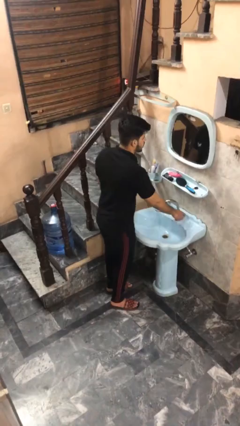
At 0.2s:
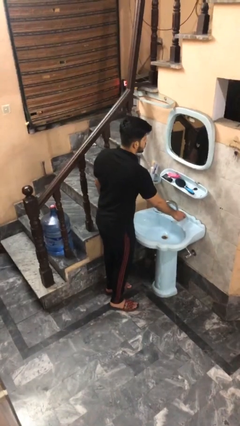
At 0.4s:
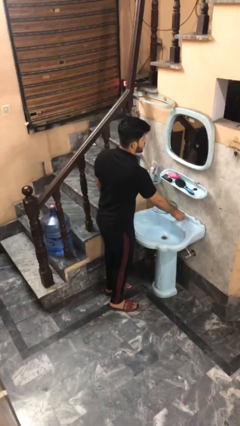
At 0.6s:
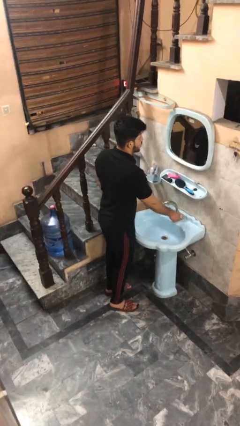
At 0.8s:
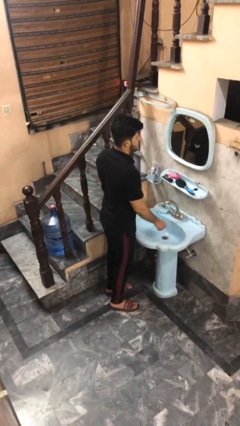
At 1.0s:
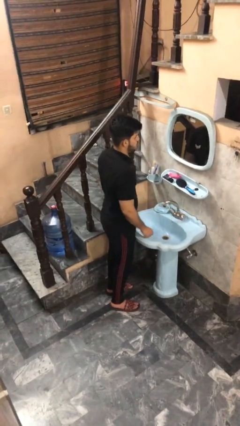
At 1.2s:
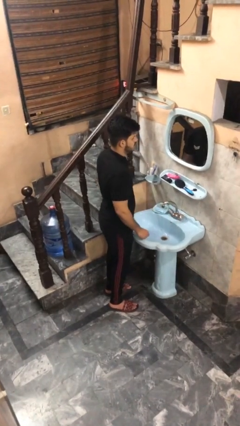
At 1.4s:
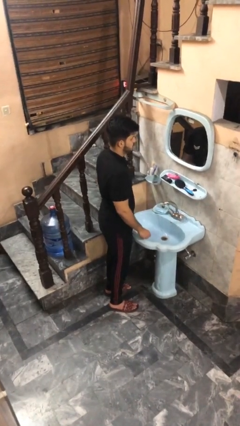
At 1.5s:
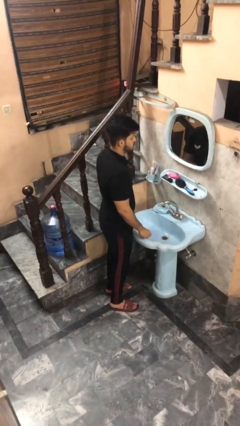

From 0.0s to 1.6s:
person turns off faucet

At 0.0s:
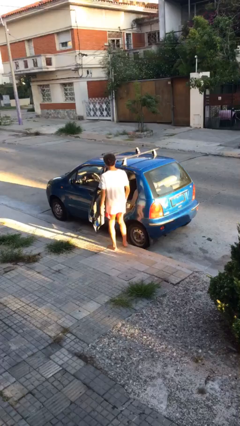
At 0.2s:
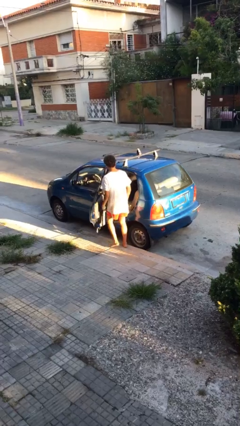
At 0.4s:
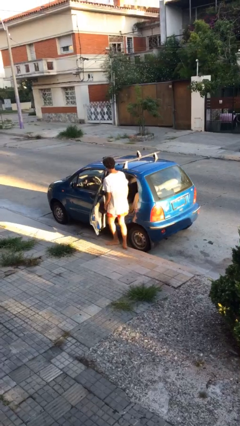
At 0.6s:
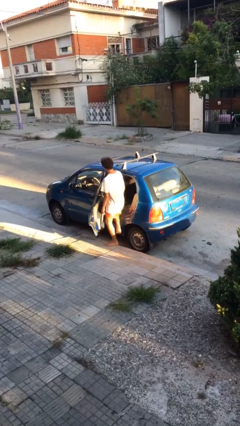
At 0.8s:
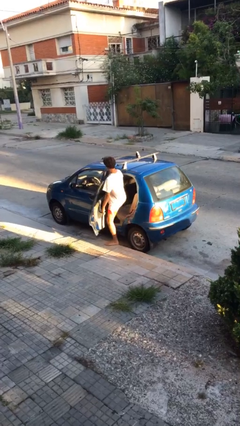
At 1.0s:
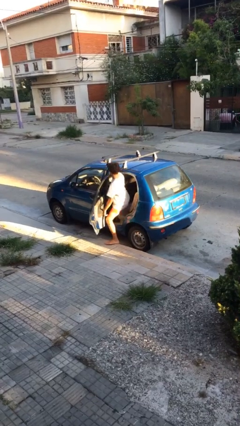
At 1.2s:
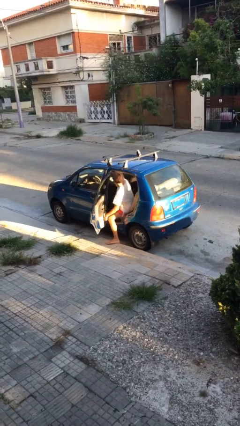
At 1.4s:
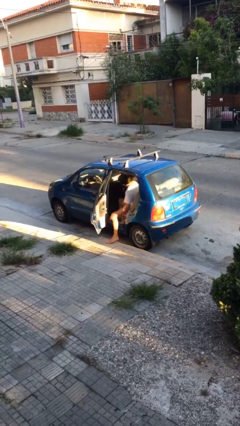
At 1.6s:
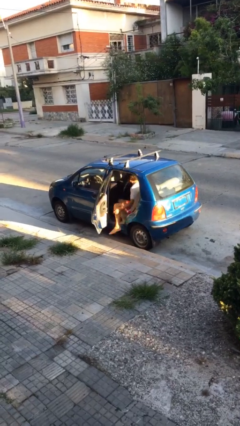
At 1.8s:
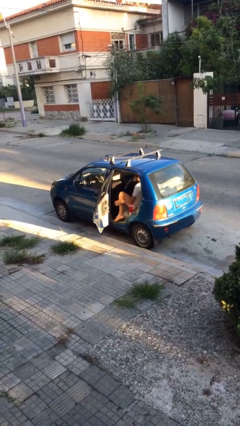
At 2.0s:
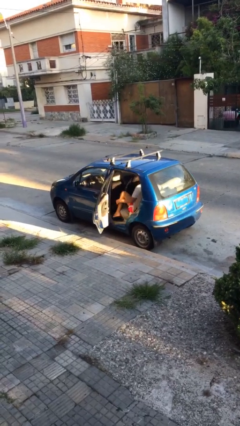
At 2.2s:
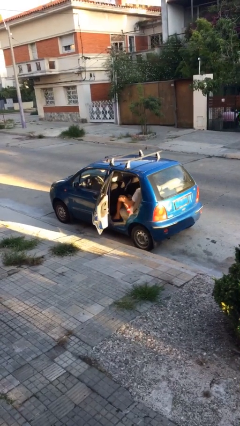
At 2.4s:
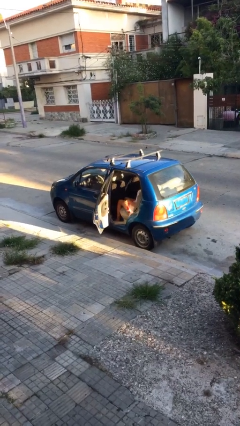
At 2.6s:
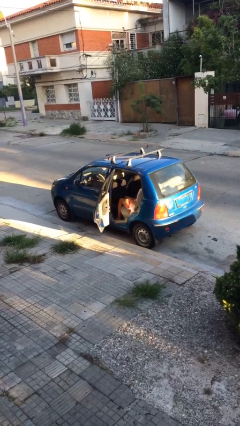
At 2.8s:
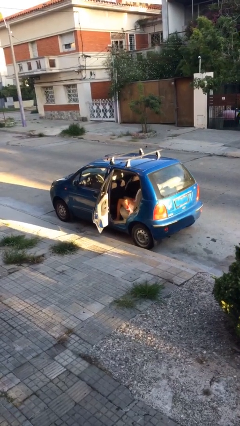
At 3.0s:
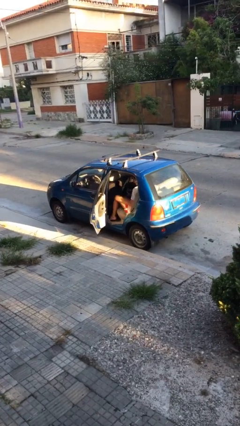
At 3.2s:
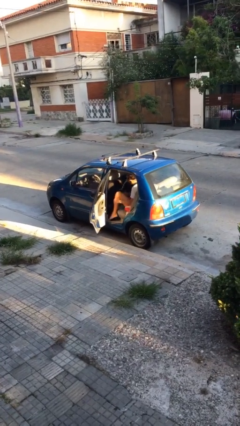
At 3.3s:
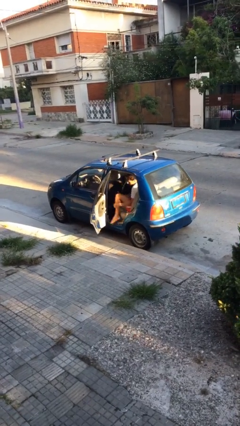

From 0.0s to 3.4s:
person enters car

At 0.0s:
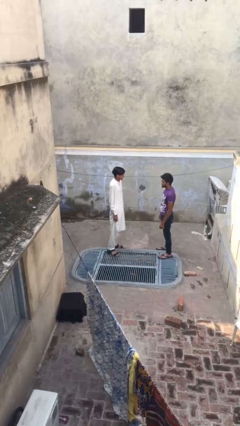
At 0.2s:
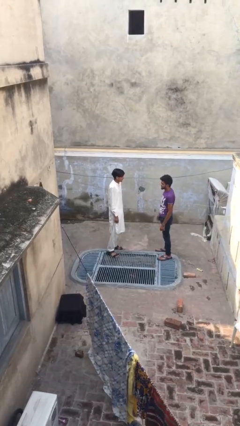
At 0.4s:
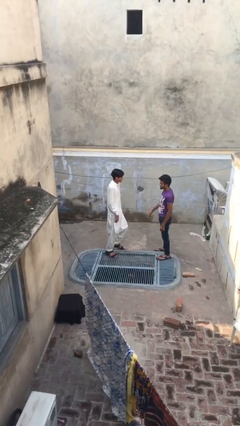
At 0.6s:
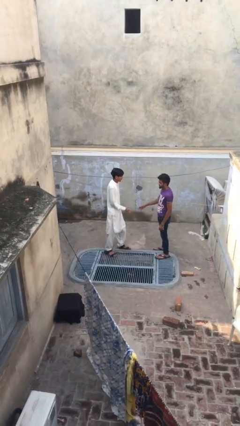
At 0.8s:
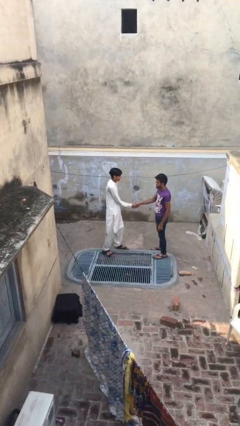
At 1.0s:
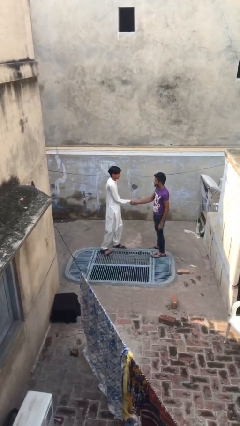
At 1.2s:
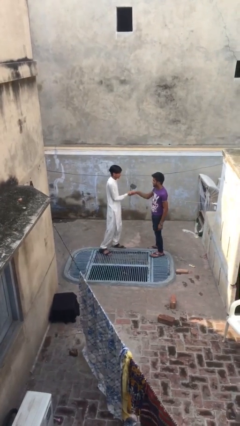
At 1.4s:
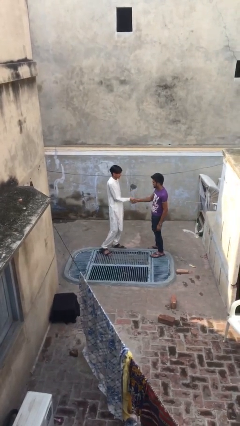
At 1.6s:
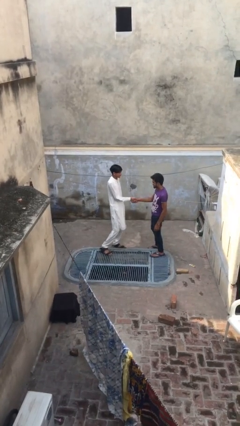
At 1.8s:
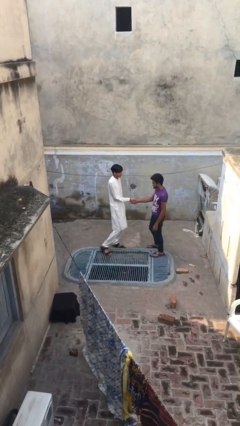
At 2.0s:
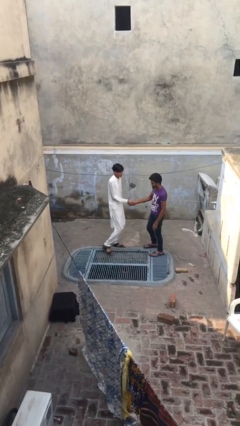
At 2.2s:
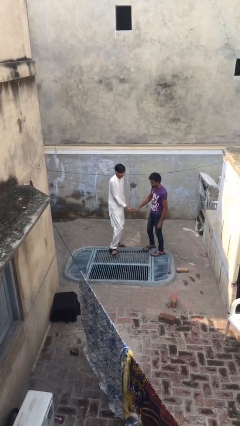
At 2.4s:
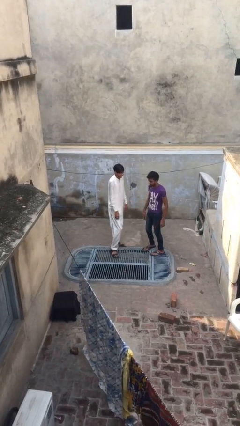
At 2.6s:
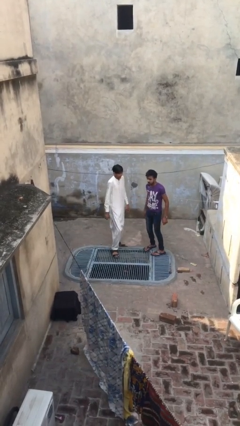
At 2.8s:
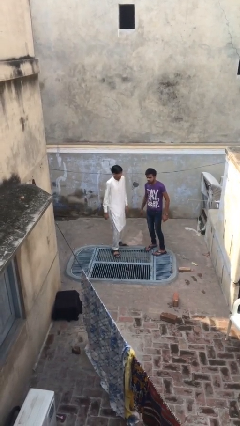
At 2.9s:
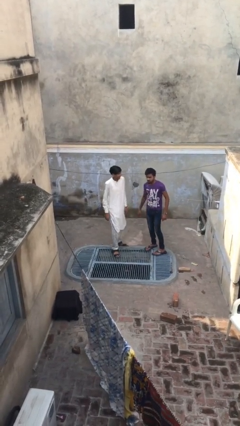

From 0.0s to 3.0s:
person shakes hand

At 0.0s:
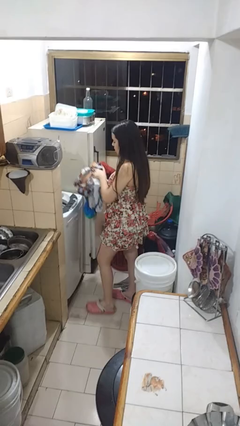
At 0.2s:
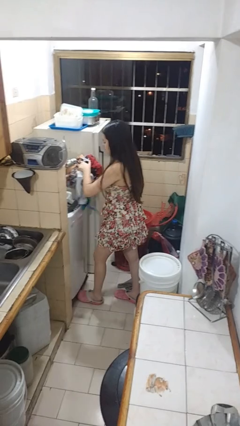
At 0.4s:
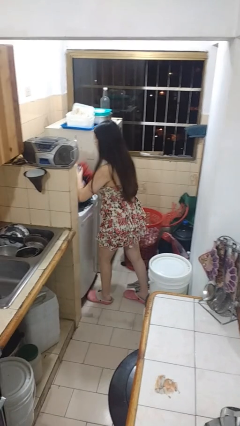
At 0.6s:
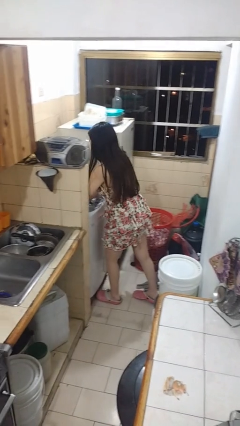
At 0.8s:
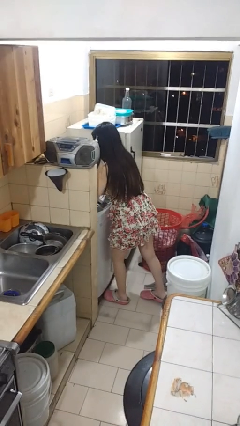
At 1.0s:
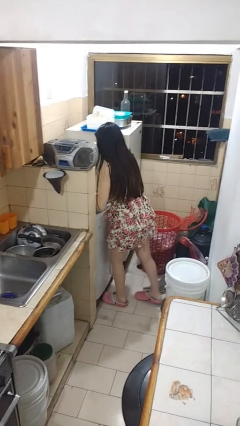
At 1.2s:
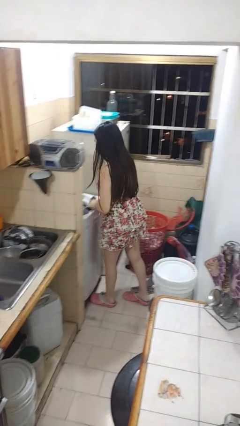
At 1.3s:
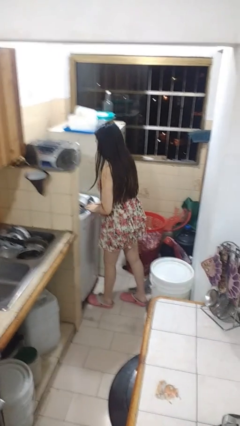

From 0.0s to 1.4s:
person loads clotheswasher

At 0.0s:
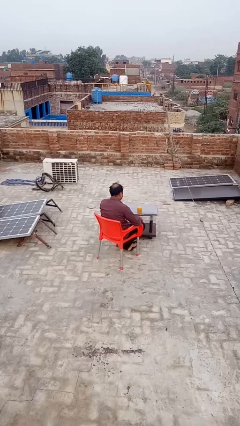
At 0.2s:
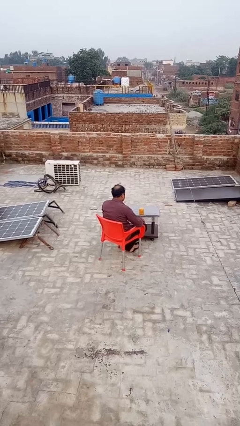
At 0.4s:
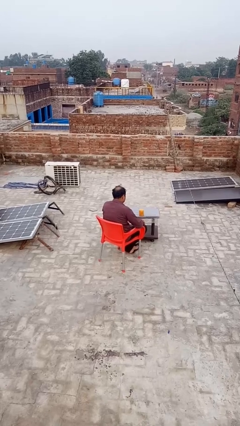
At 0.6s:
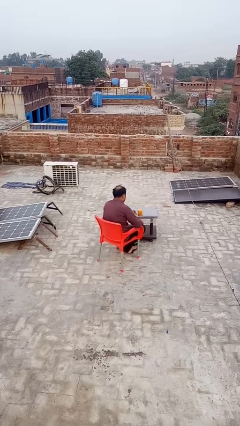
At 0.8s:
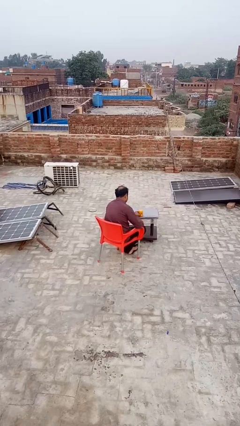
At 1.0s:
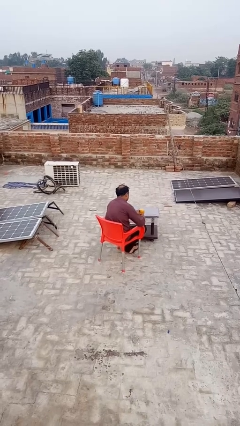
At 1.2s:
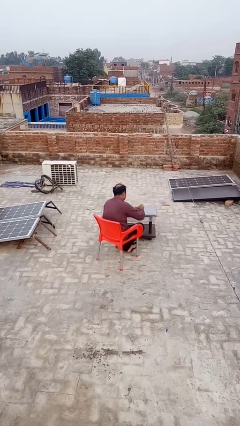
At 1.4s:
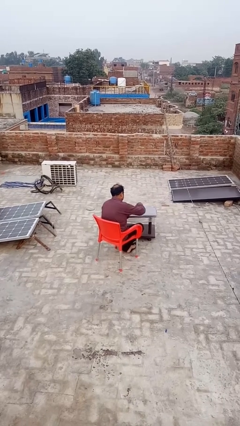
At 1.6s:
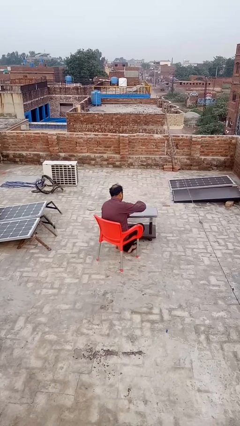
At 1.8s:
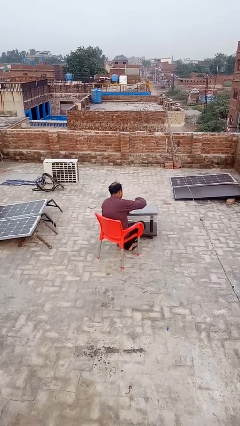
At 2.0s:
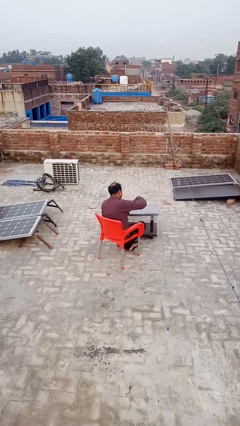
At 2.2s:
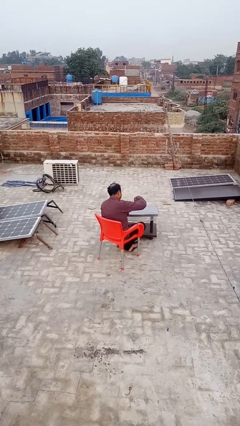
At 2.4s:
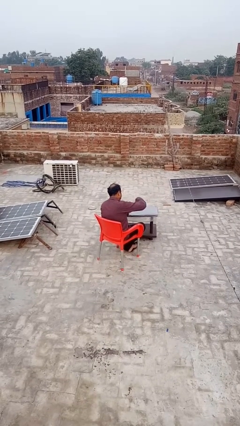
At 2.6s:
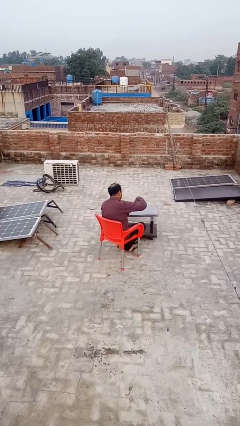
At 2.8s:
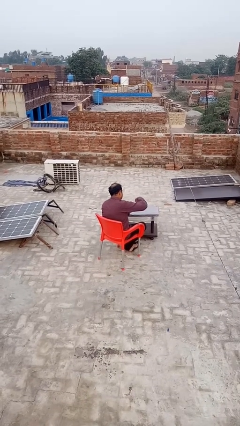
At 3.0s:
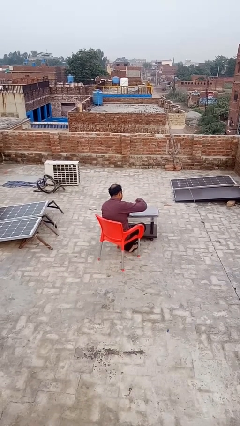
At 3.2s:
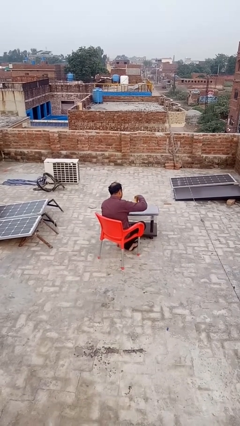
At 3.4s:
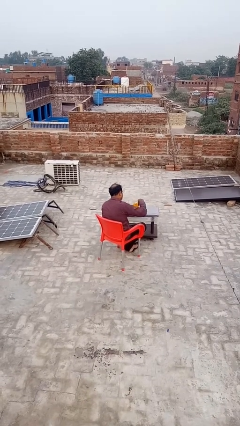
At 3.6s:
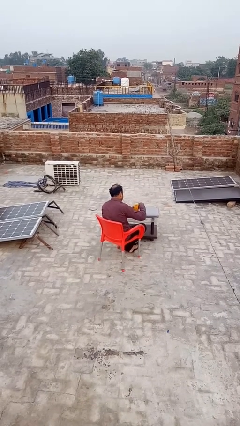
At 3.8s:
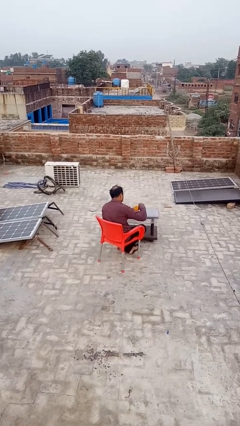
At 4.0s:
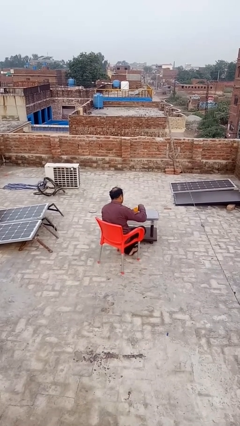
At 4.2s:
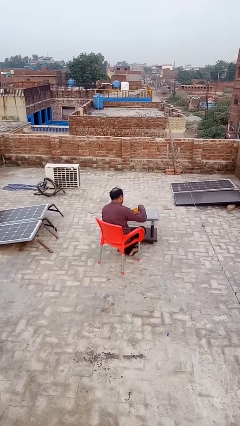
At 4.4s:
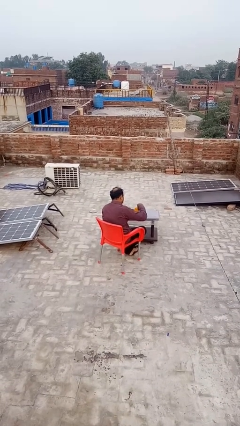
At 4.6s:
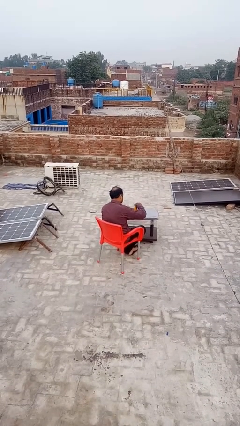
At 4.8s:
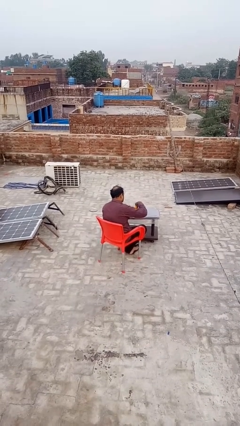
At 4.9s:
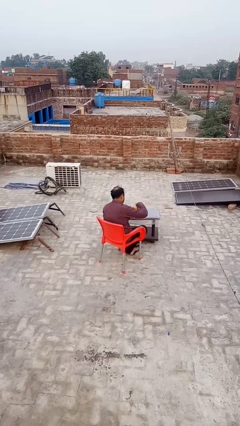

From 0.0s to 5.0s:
person opens jar

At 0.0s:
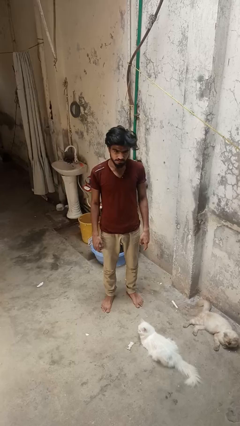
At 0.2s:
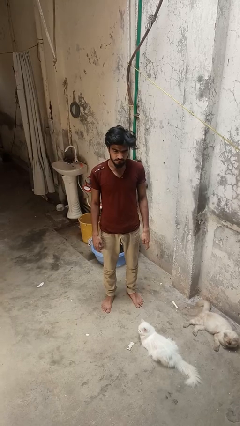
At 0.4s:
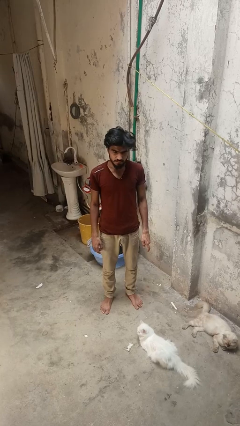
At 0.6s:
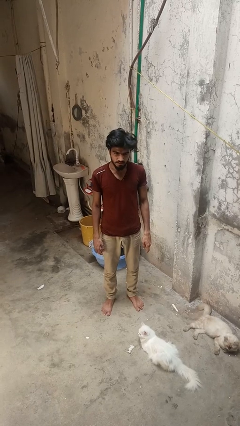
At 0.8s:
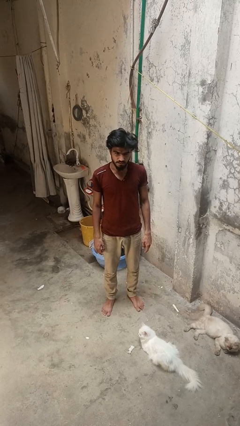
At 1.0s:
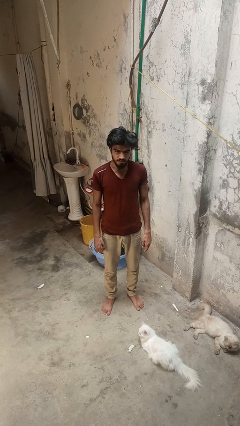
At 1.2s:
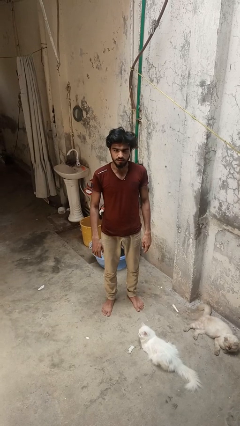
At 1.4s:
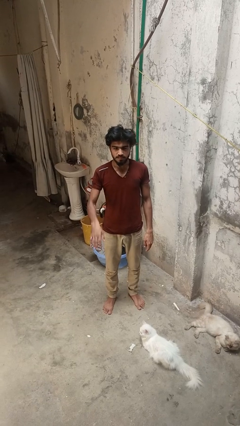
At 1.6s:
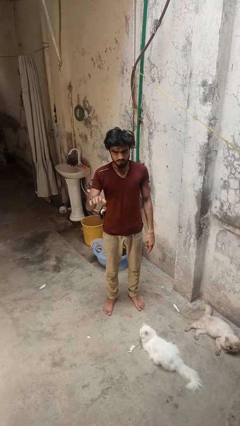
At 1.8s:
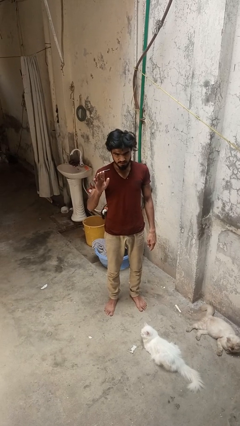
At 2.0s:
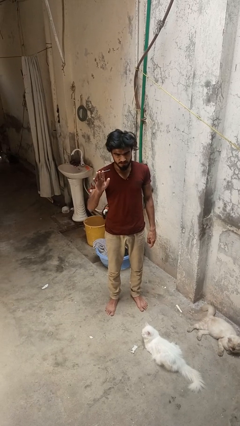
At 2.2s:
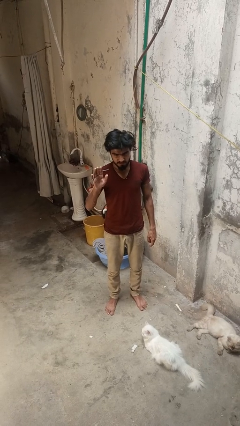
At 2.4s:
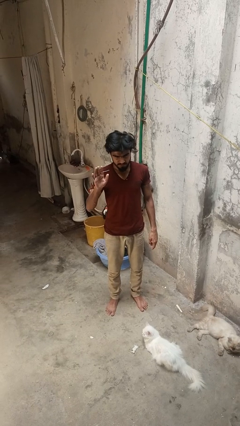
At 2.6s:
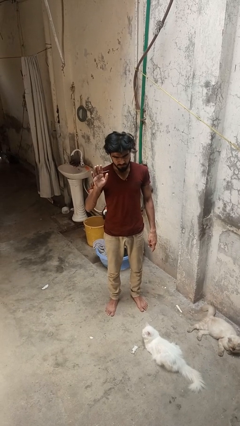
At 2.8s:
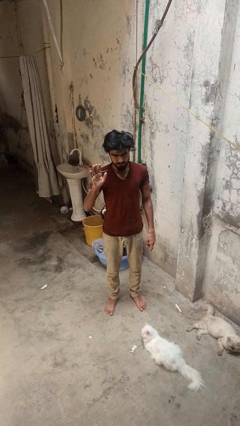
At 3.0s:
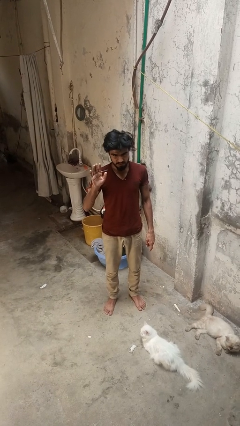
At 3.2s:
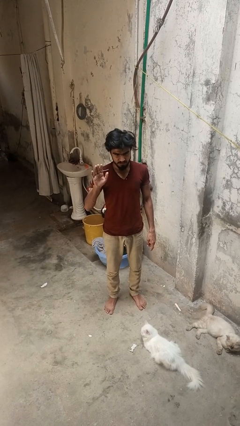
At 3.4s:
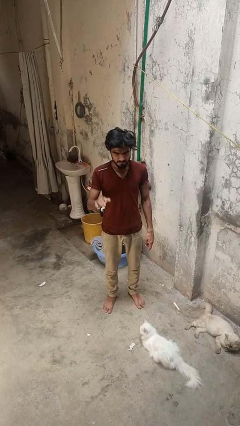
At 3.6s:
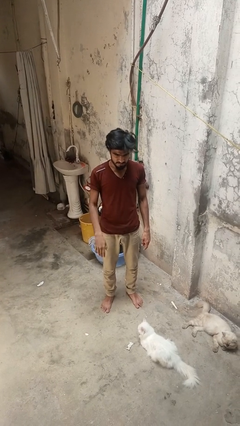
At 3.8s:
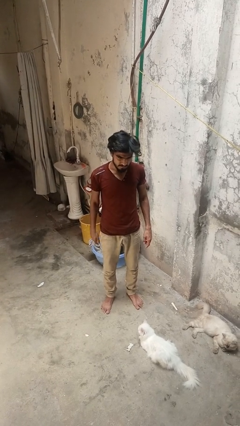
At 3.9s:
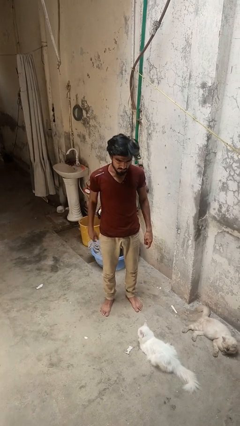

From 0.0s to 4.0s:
person gestures raise hand
